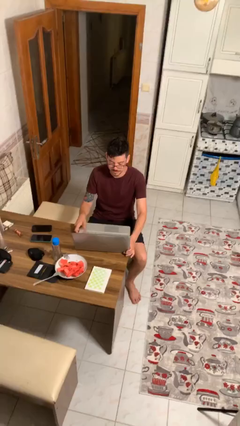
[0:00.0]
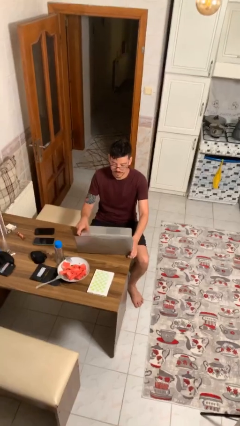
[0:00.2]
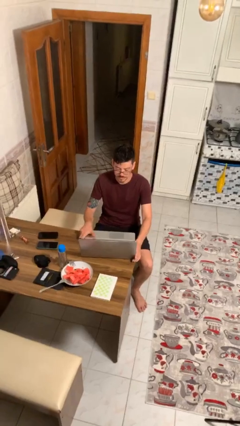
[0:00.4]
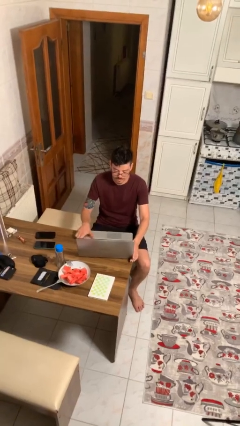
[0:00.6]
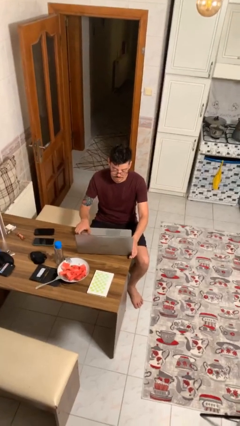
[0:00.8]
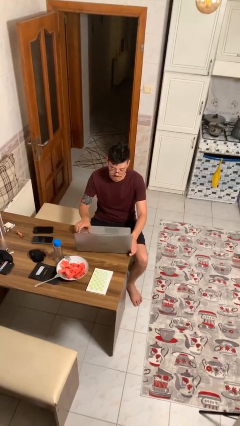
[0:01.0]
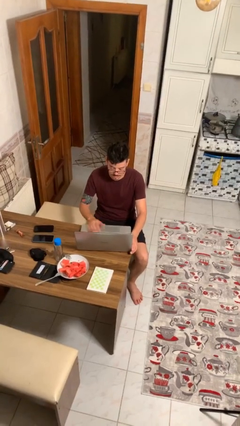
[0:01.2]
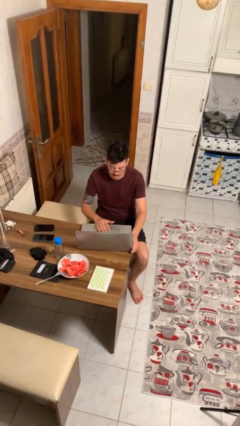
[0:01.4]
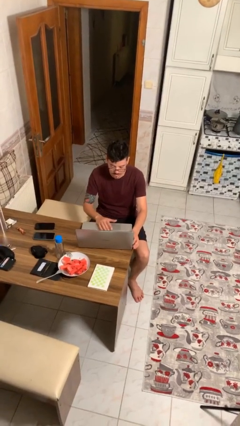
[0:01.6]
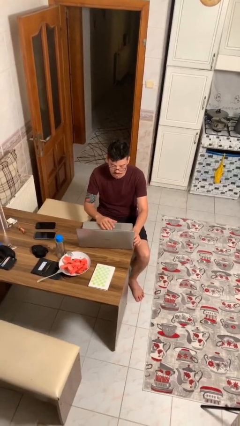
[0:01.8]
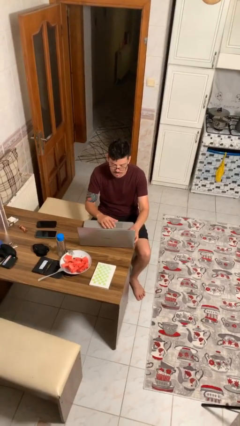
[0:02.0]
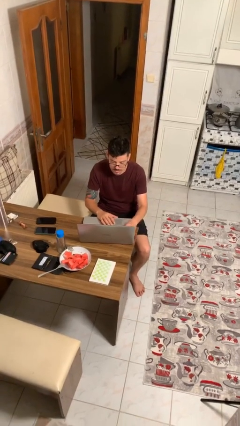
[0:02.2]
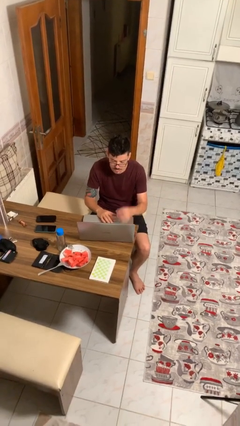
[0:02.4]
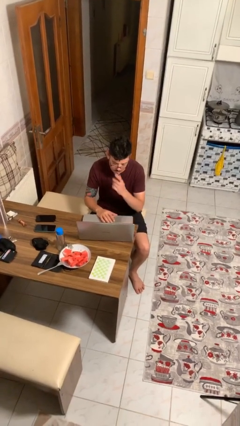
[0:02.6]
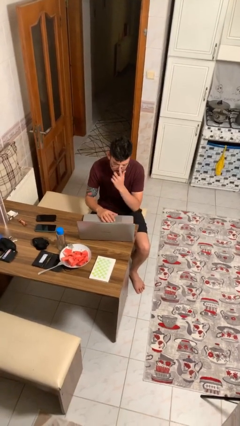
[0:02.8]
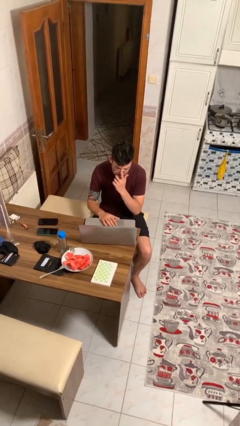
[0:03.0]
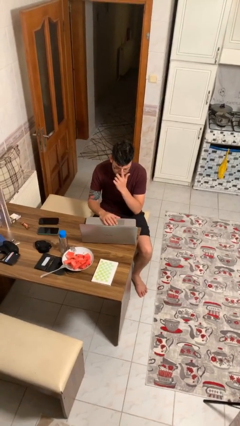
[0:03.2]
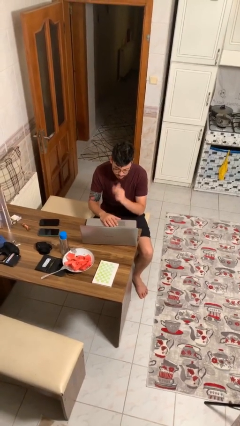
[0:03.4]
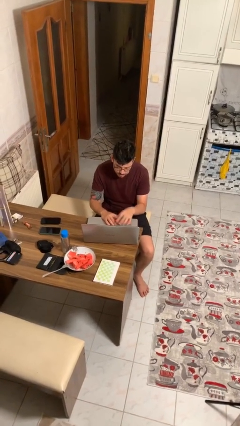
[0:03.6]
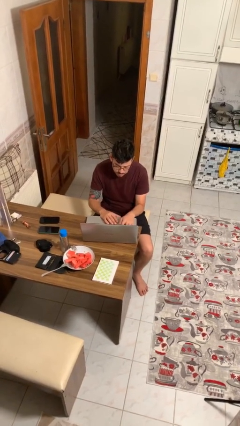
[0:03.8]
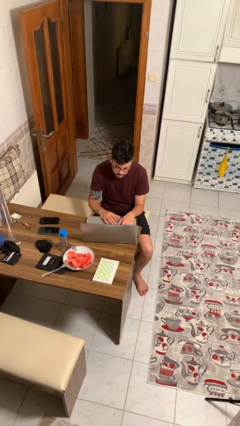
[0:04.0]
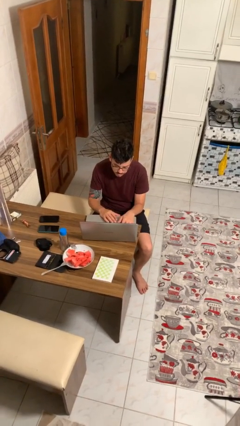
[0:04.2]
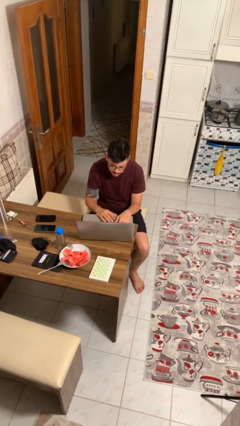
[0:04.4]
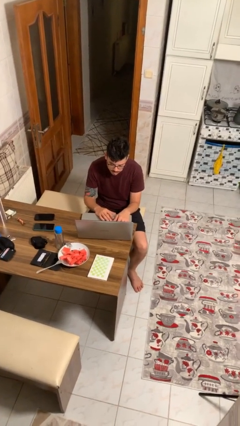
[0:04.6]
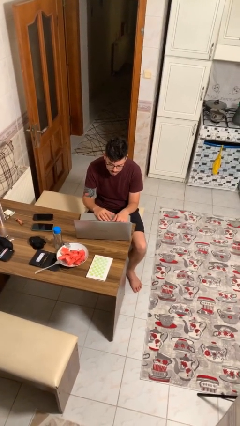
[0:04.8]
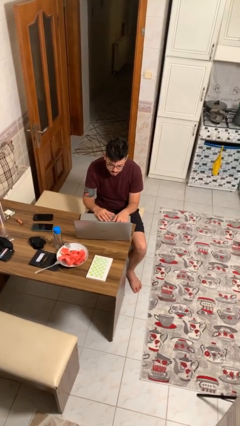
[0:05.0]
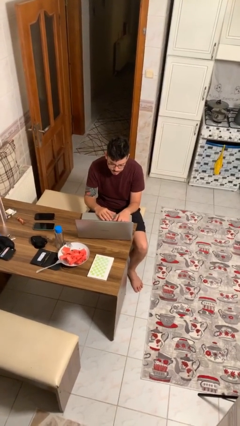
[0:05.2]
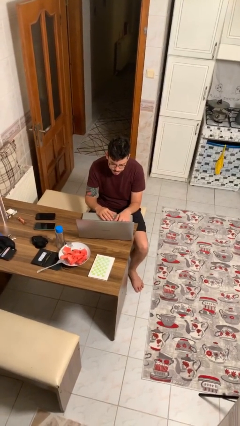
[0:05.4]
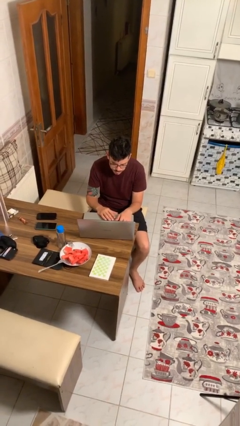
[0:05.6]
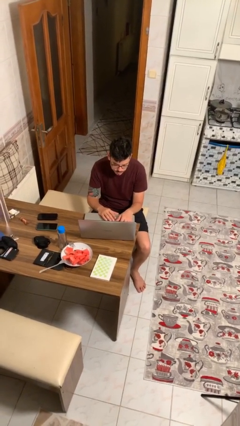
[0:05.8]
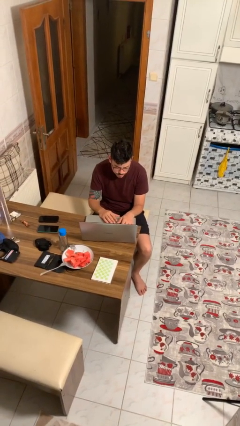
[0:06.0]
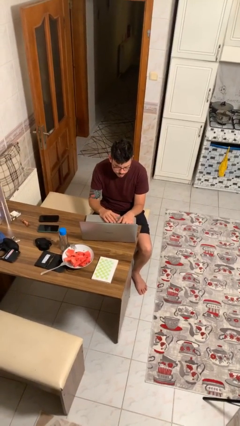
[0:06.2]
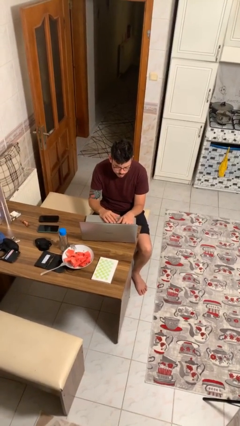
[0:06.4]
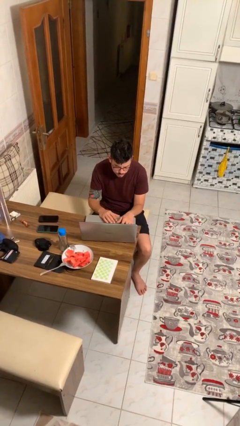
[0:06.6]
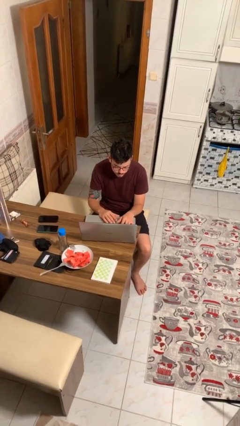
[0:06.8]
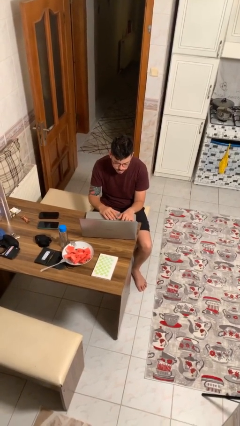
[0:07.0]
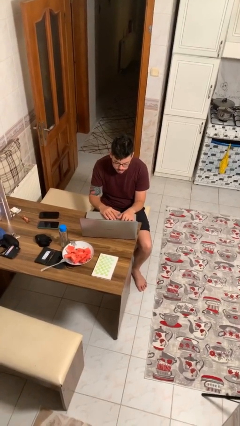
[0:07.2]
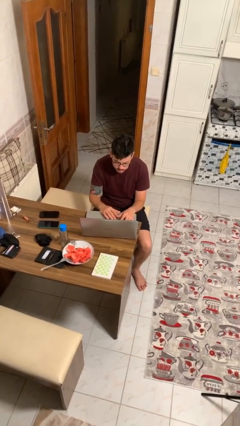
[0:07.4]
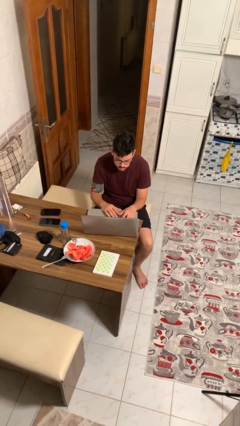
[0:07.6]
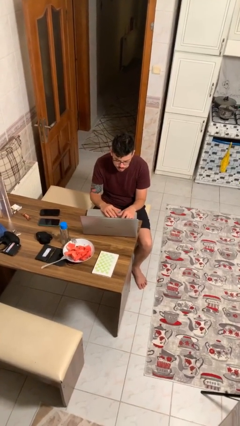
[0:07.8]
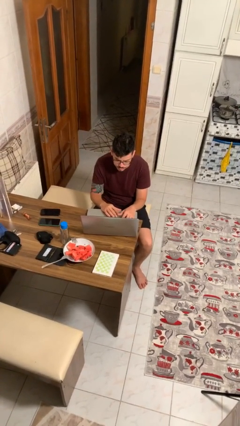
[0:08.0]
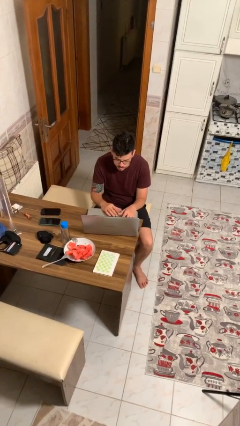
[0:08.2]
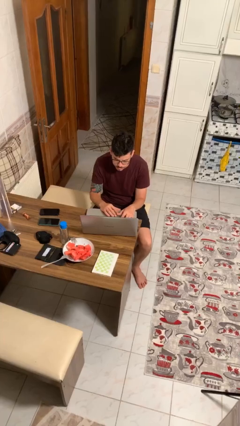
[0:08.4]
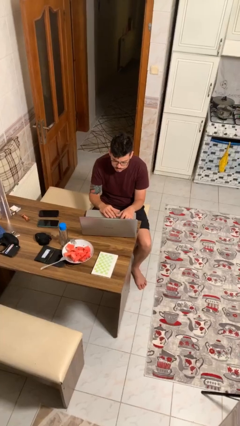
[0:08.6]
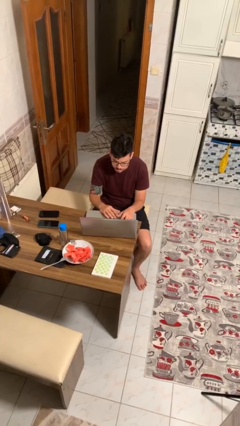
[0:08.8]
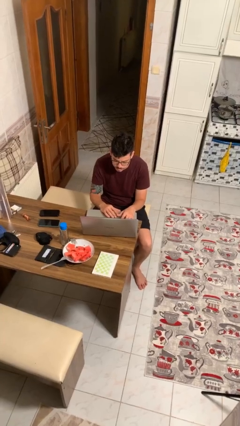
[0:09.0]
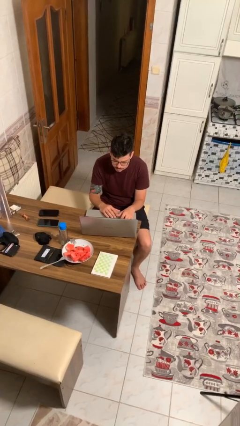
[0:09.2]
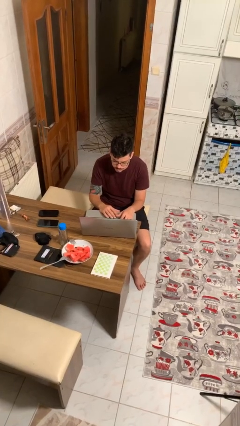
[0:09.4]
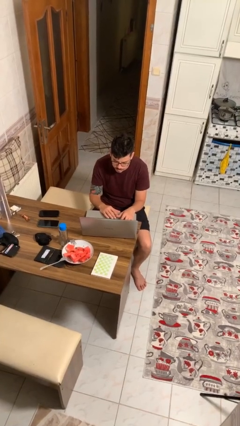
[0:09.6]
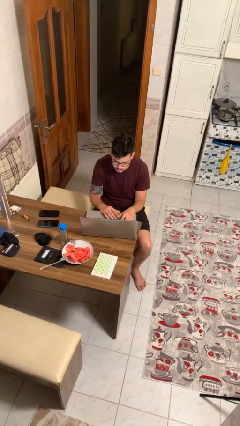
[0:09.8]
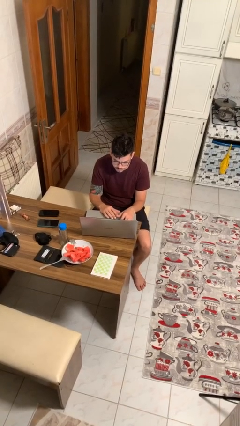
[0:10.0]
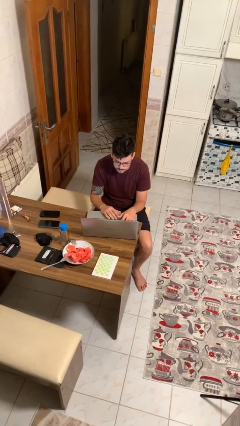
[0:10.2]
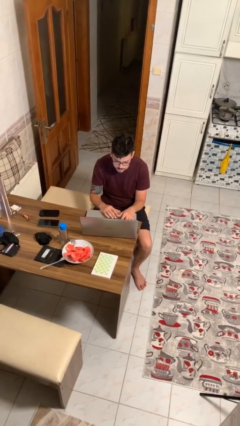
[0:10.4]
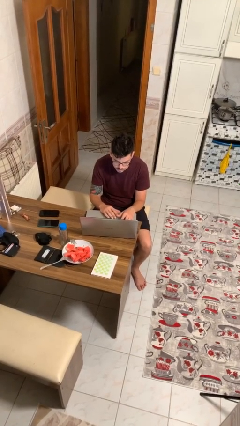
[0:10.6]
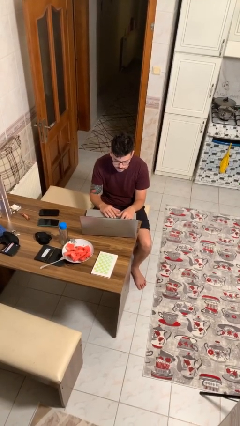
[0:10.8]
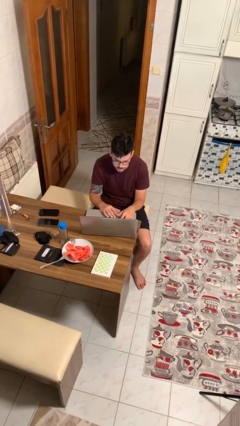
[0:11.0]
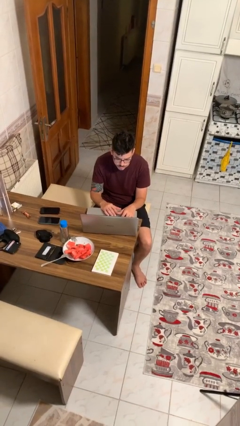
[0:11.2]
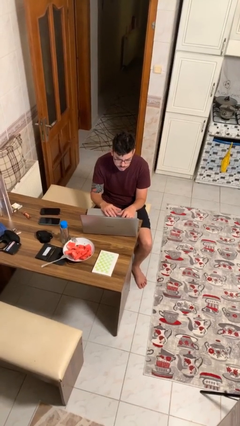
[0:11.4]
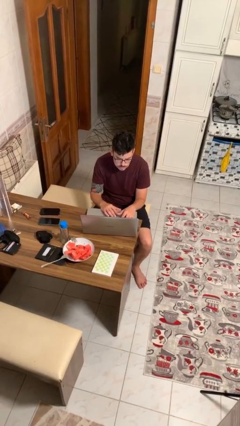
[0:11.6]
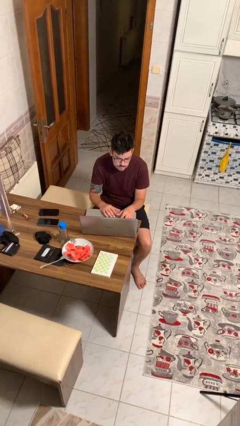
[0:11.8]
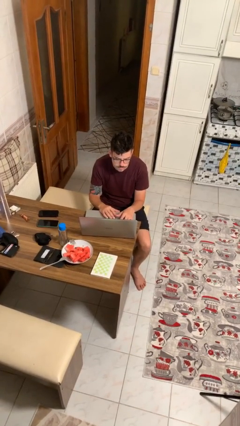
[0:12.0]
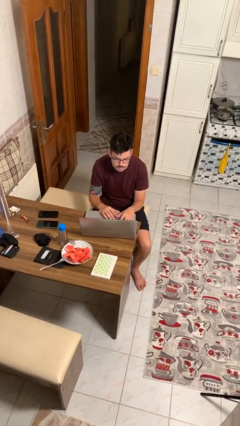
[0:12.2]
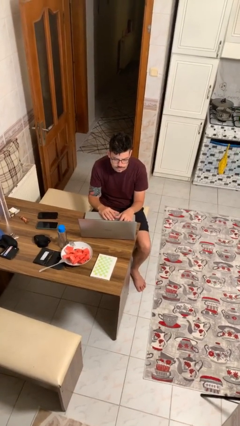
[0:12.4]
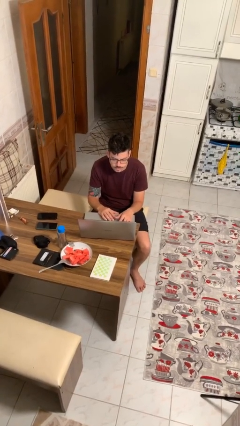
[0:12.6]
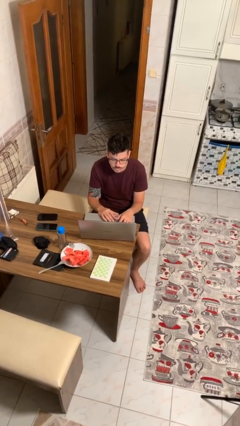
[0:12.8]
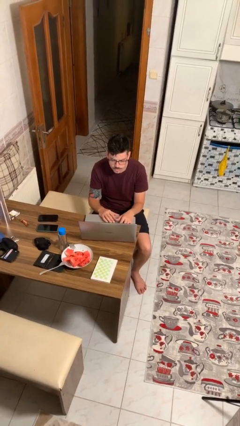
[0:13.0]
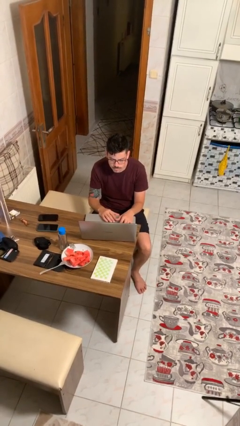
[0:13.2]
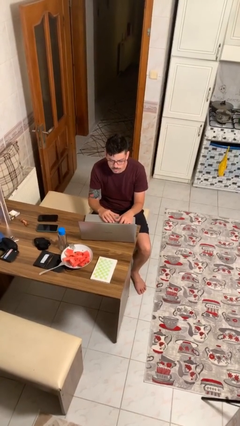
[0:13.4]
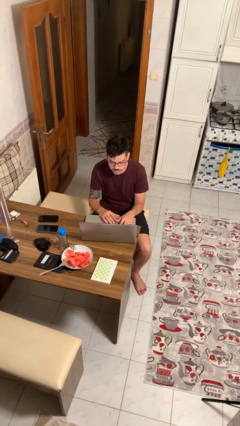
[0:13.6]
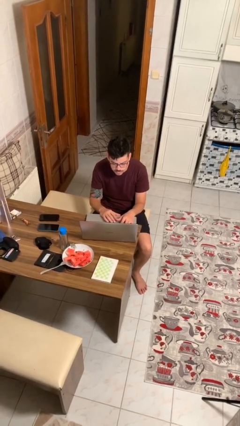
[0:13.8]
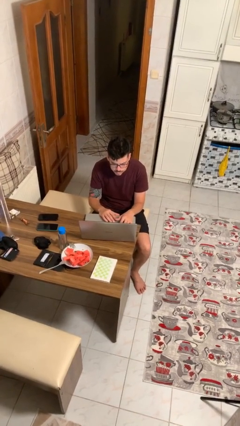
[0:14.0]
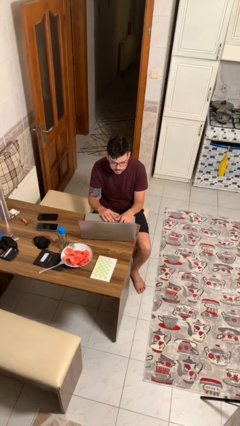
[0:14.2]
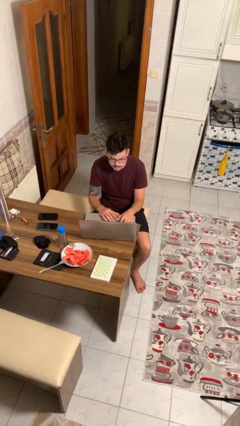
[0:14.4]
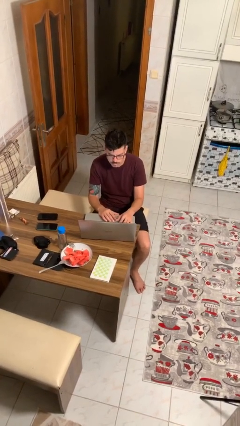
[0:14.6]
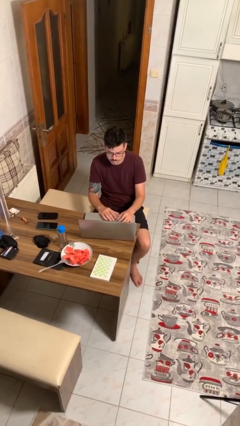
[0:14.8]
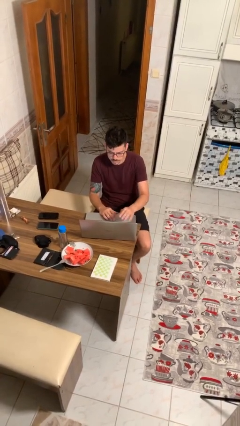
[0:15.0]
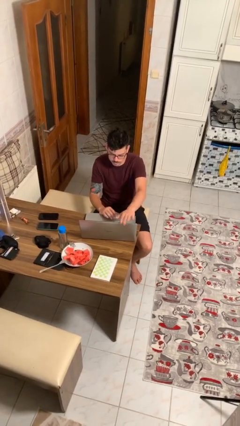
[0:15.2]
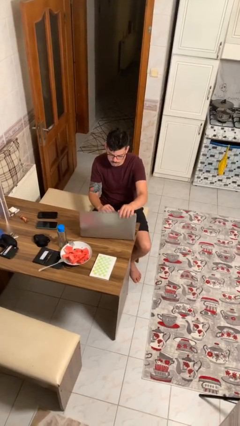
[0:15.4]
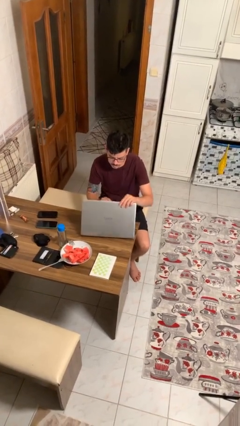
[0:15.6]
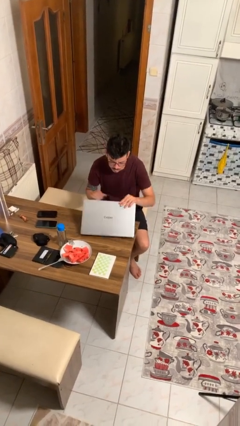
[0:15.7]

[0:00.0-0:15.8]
person interacts with laptop

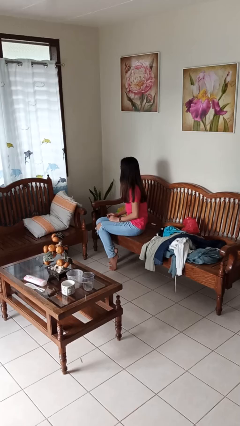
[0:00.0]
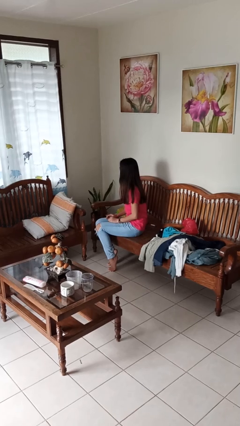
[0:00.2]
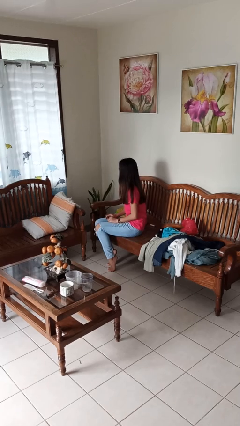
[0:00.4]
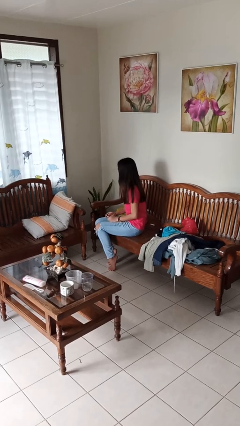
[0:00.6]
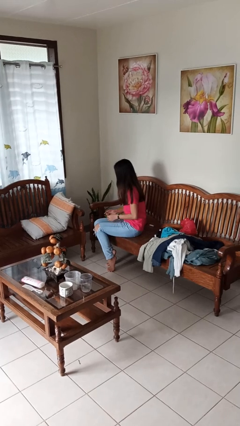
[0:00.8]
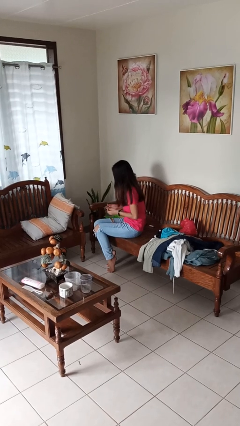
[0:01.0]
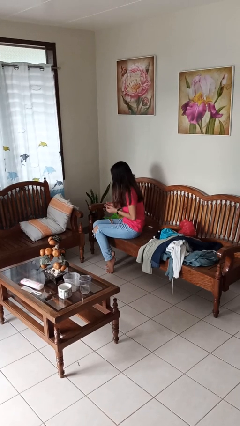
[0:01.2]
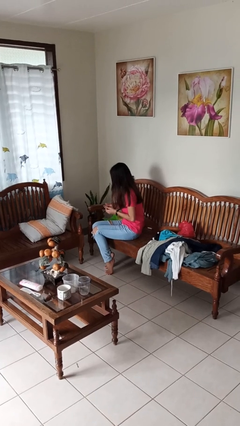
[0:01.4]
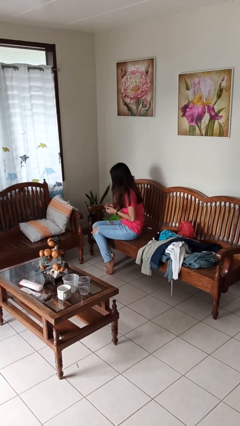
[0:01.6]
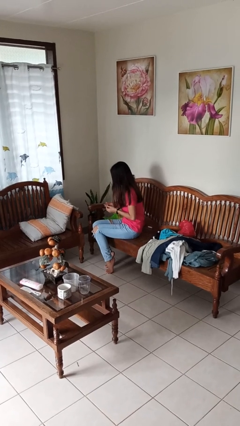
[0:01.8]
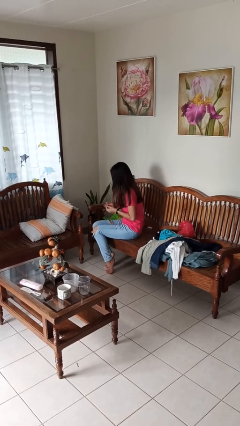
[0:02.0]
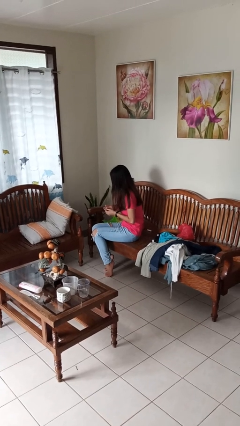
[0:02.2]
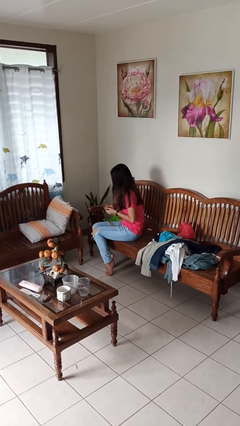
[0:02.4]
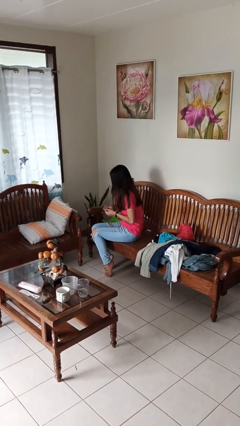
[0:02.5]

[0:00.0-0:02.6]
person clips fingernails
